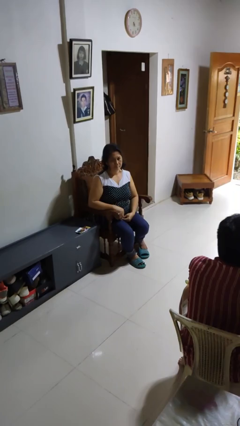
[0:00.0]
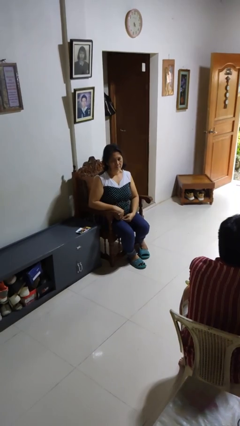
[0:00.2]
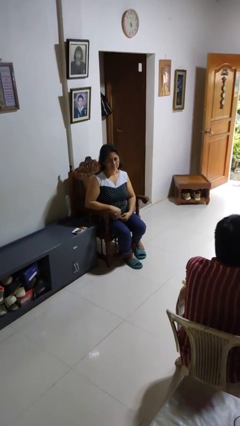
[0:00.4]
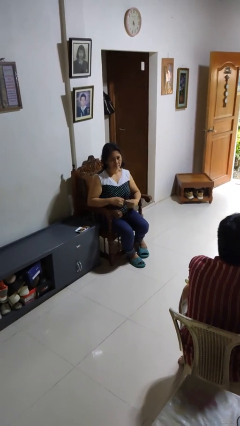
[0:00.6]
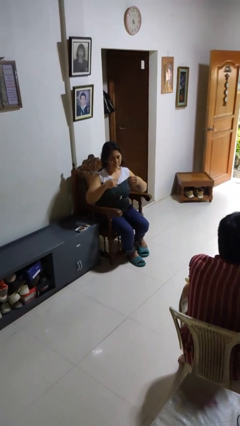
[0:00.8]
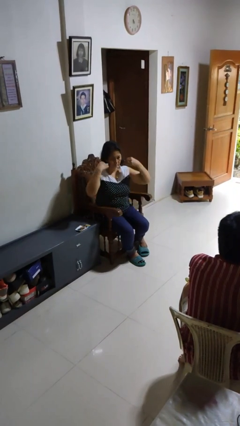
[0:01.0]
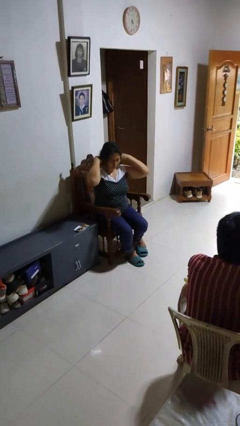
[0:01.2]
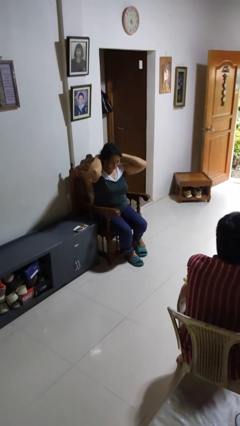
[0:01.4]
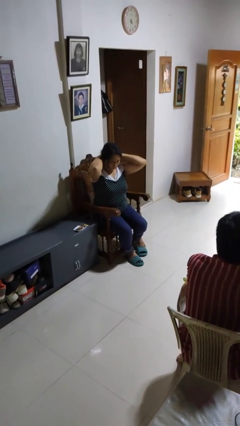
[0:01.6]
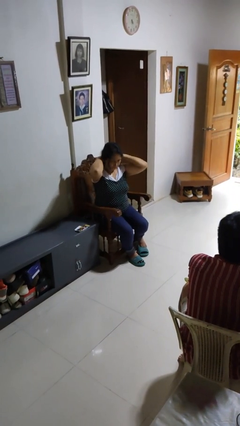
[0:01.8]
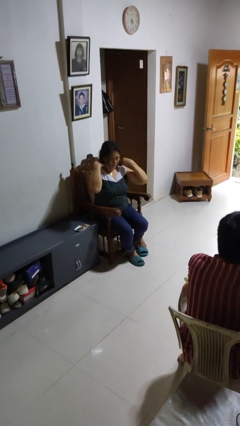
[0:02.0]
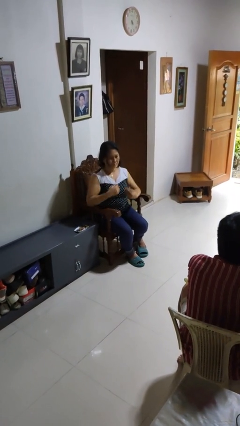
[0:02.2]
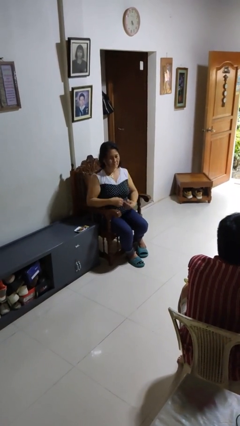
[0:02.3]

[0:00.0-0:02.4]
person puts on necklace

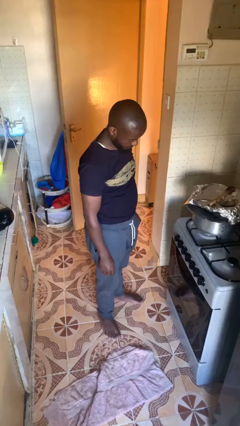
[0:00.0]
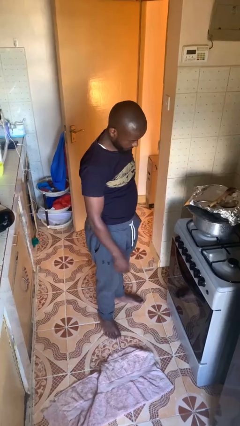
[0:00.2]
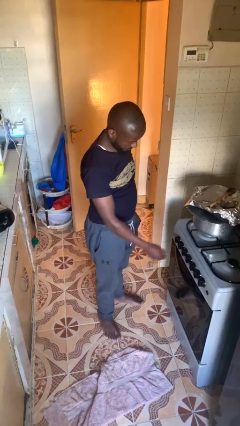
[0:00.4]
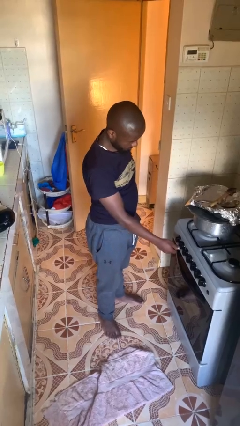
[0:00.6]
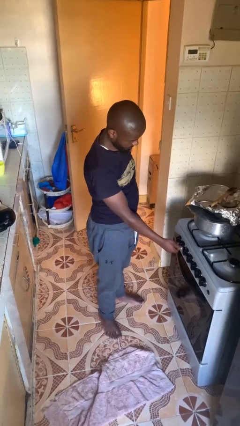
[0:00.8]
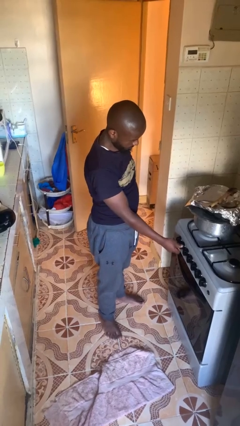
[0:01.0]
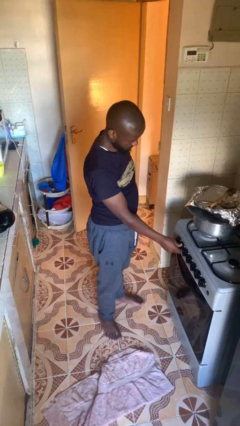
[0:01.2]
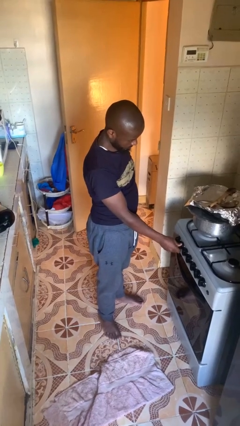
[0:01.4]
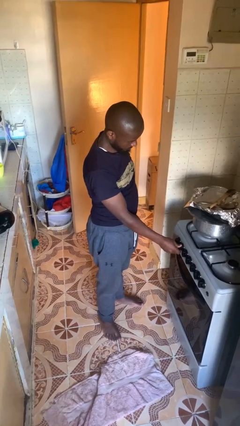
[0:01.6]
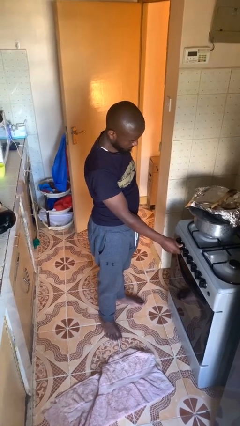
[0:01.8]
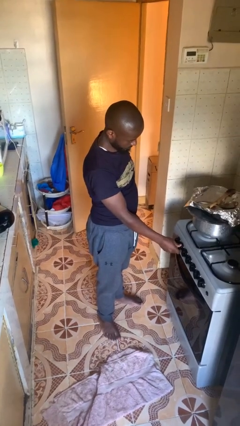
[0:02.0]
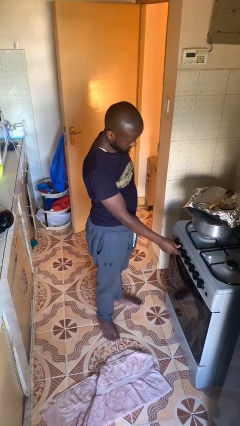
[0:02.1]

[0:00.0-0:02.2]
person adjusts thermostat

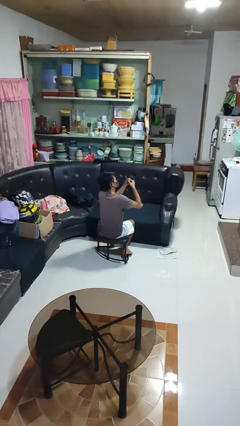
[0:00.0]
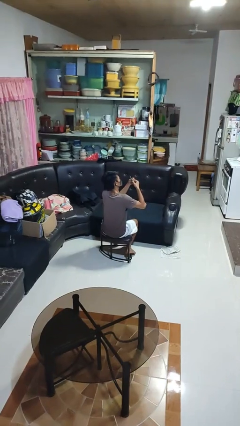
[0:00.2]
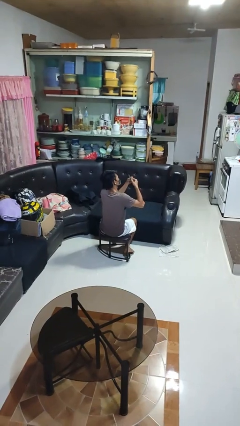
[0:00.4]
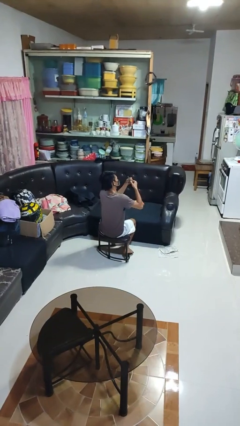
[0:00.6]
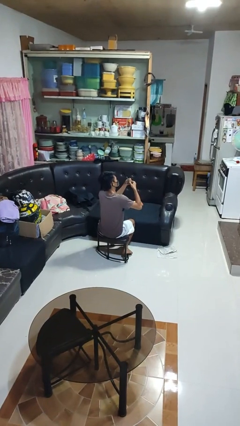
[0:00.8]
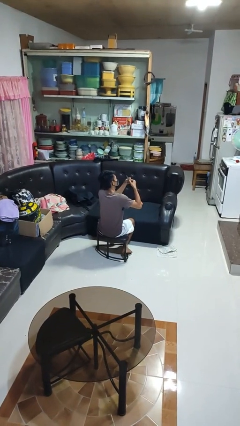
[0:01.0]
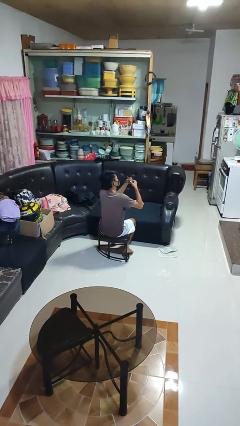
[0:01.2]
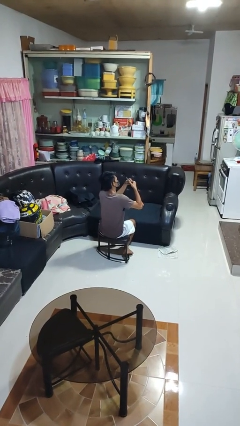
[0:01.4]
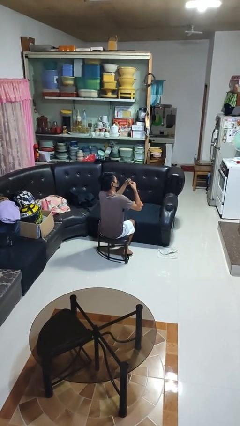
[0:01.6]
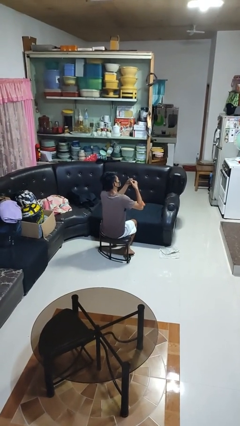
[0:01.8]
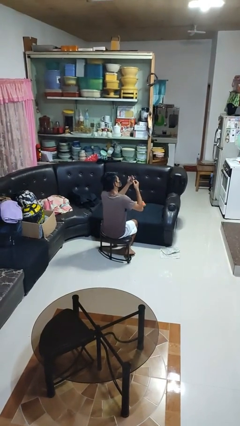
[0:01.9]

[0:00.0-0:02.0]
person files fingernails

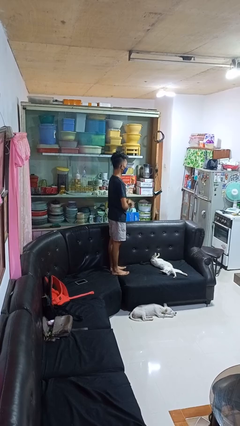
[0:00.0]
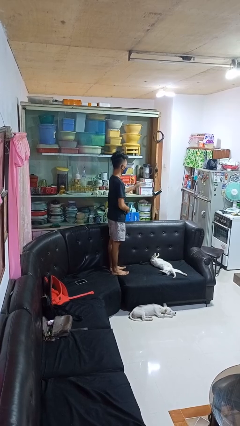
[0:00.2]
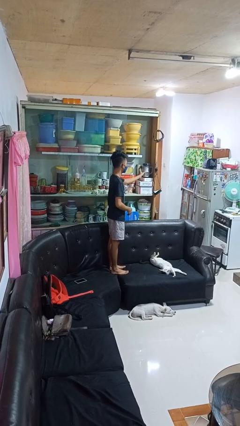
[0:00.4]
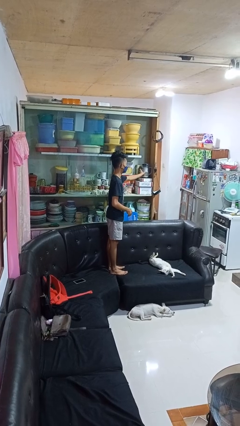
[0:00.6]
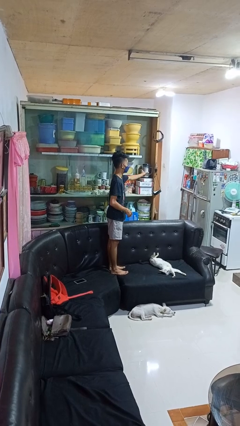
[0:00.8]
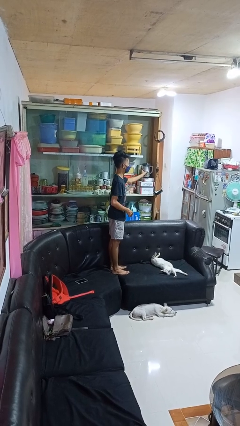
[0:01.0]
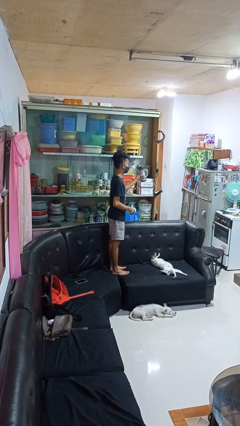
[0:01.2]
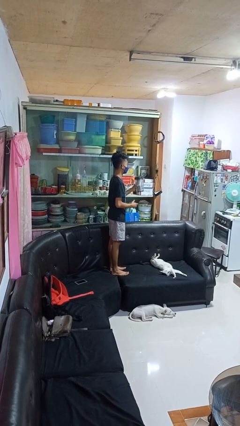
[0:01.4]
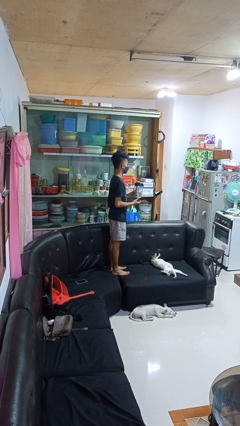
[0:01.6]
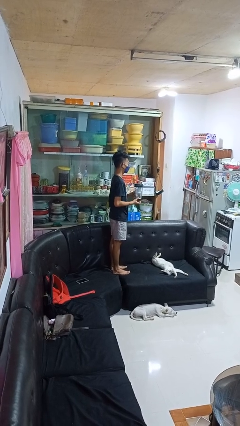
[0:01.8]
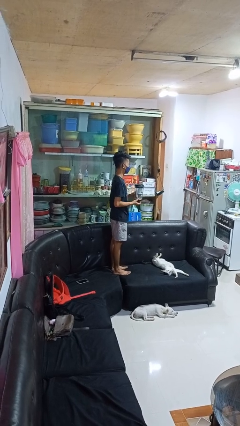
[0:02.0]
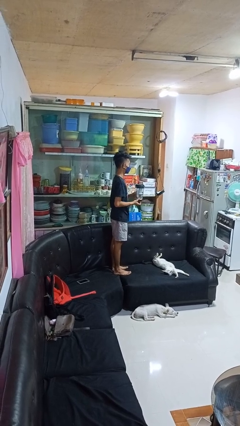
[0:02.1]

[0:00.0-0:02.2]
person picks up object from cabinet

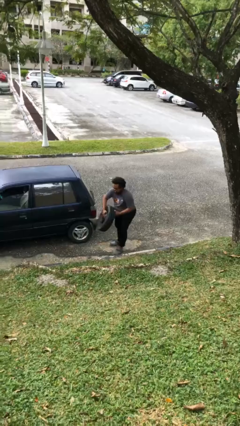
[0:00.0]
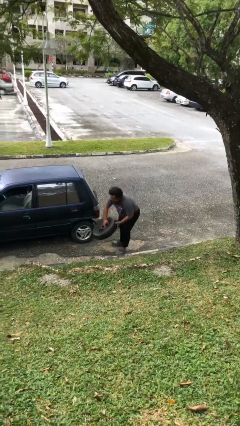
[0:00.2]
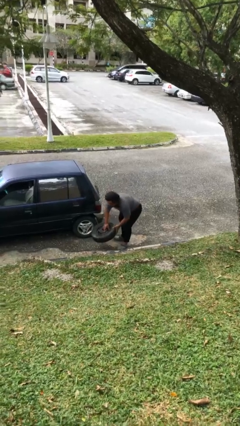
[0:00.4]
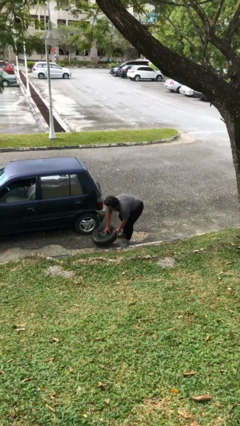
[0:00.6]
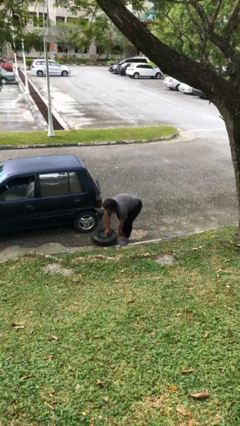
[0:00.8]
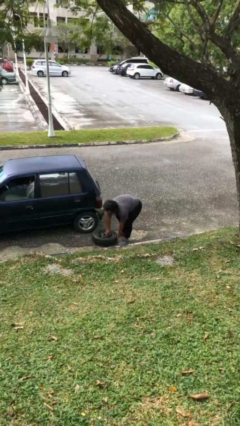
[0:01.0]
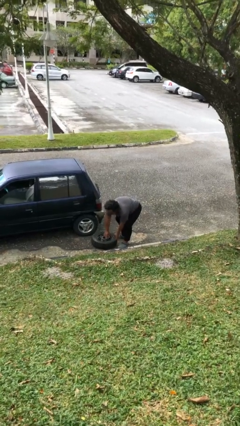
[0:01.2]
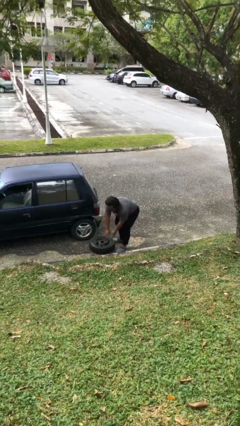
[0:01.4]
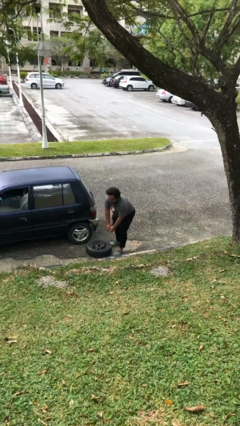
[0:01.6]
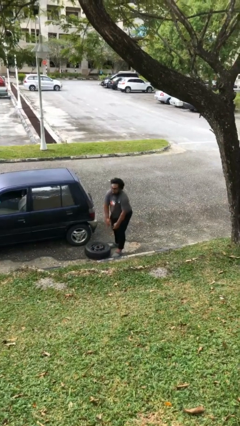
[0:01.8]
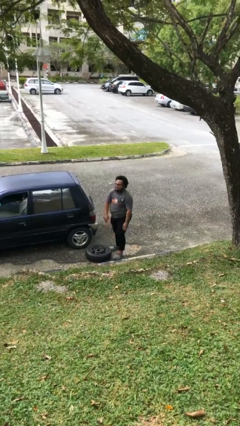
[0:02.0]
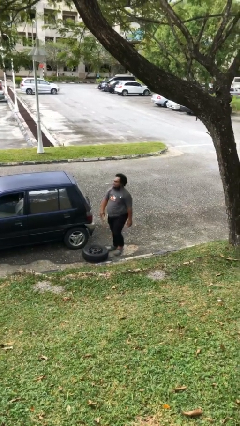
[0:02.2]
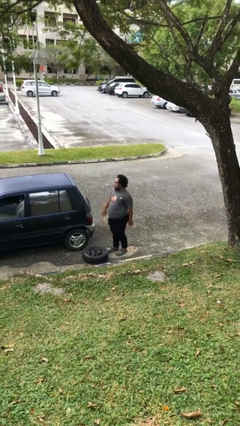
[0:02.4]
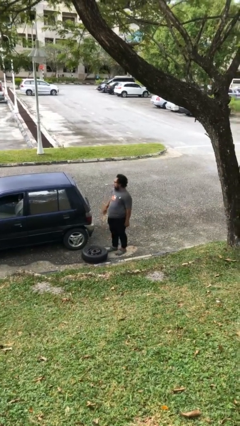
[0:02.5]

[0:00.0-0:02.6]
person puts down object on floor

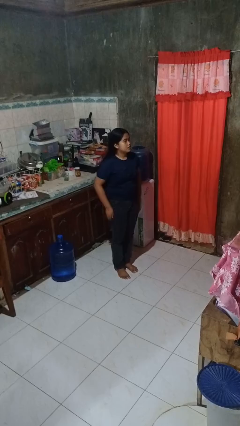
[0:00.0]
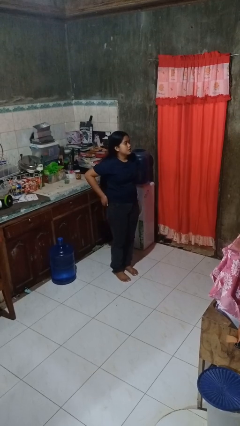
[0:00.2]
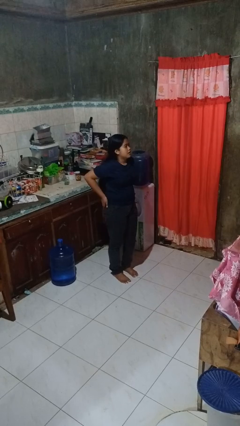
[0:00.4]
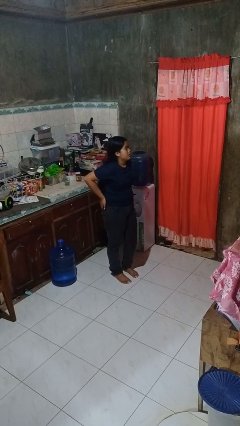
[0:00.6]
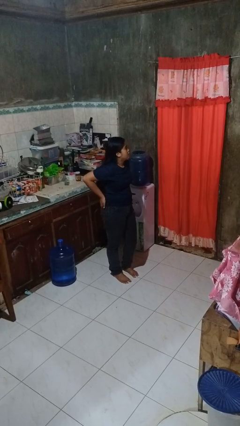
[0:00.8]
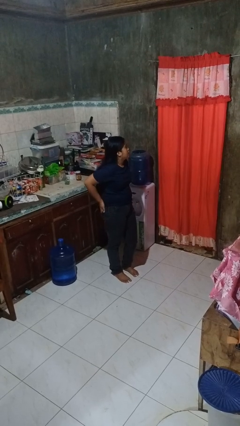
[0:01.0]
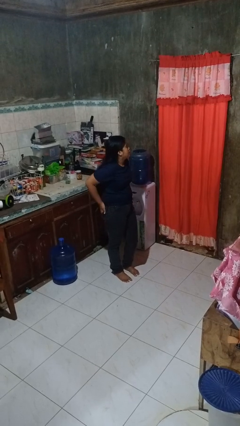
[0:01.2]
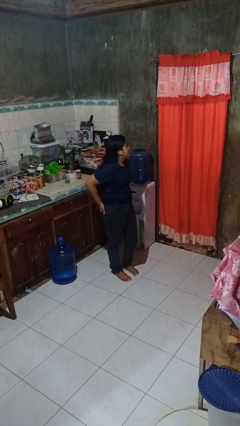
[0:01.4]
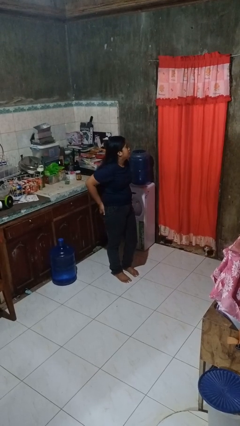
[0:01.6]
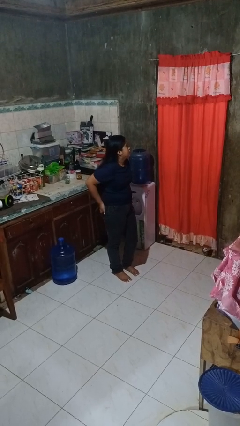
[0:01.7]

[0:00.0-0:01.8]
person puts hands in back pockets

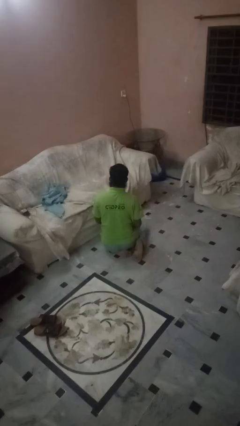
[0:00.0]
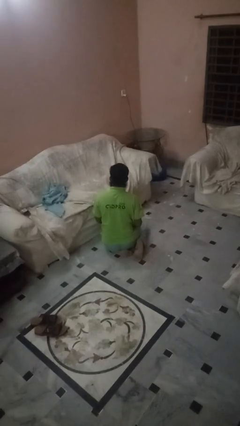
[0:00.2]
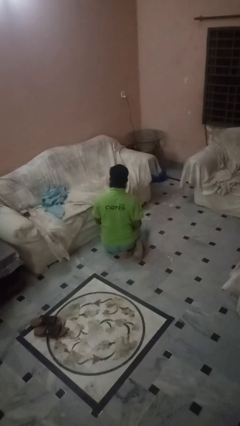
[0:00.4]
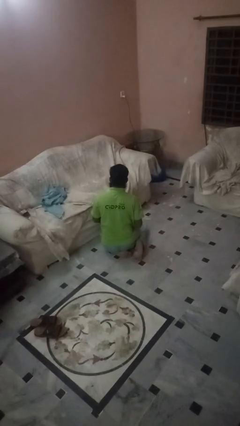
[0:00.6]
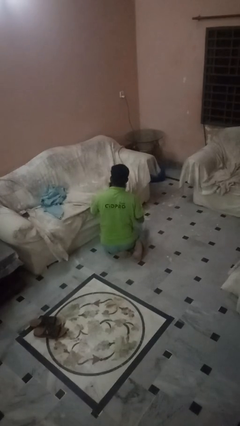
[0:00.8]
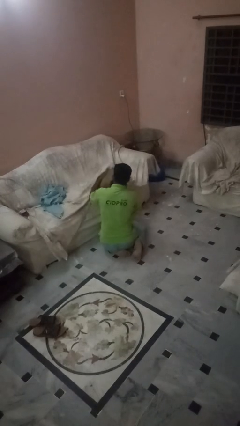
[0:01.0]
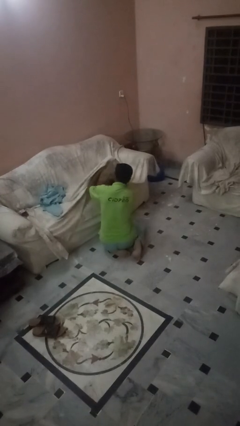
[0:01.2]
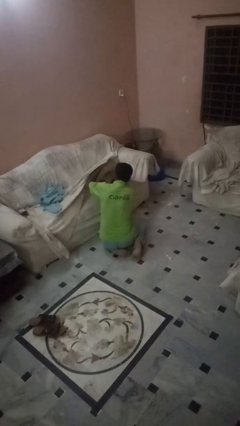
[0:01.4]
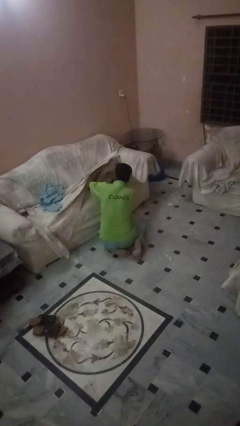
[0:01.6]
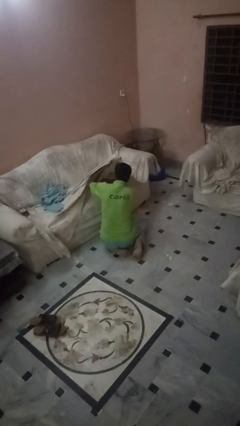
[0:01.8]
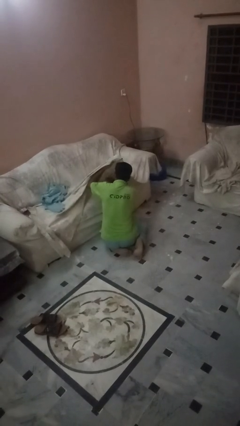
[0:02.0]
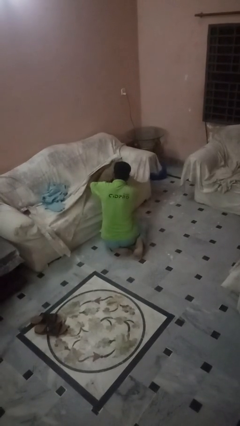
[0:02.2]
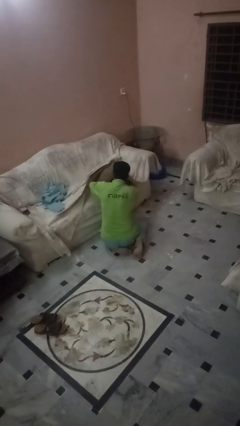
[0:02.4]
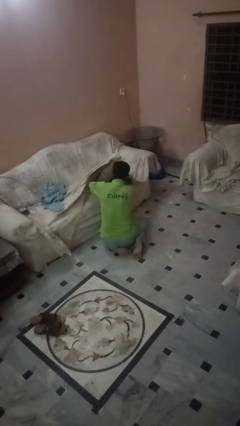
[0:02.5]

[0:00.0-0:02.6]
person searches in couch

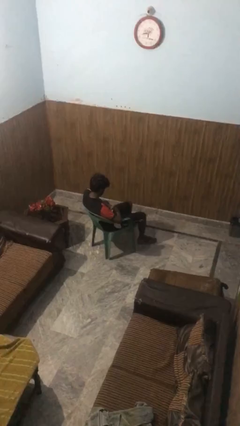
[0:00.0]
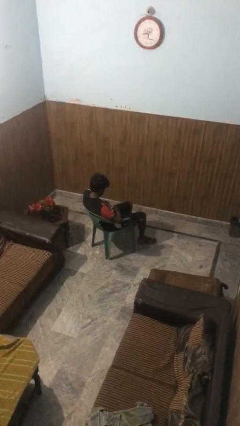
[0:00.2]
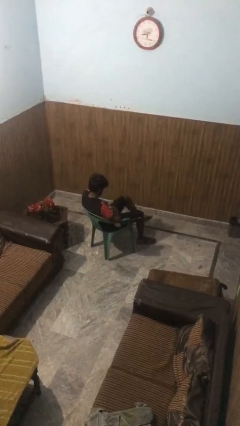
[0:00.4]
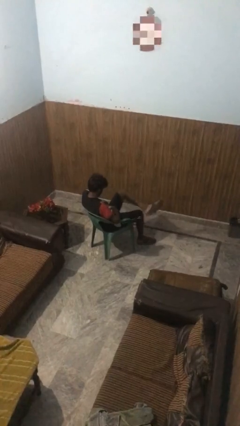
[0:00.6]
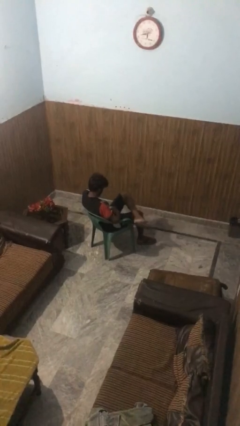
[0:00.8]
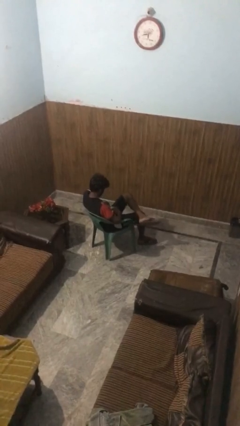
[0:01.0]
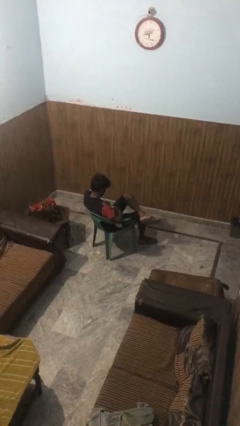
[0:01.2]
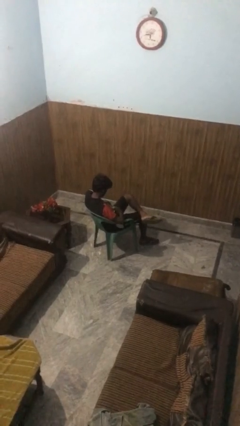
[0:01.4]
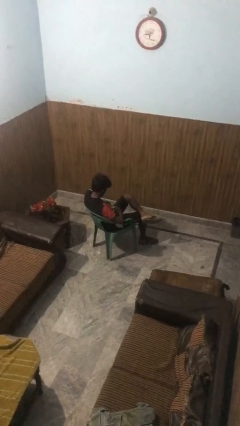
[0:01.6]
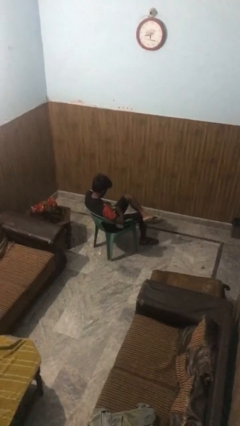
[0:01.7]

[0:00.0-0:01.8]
person crosses legs
